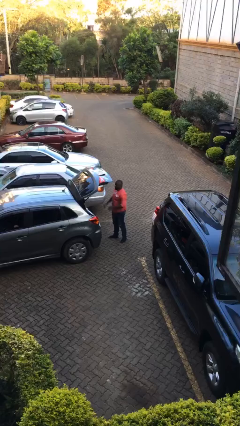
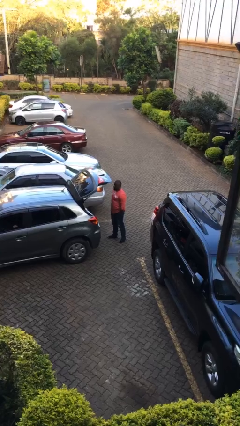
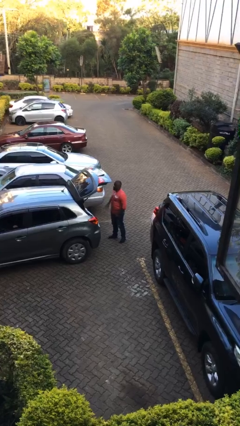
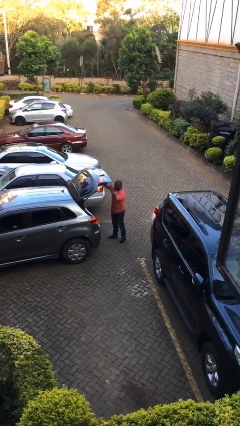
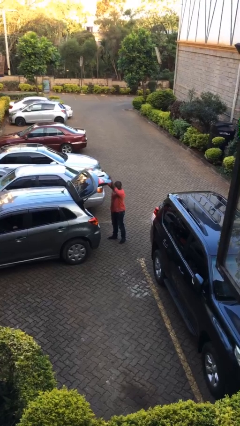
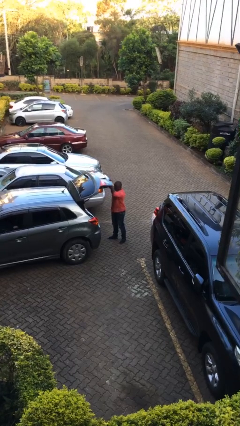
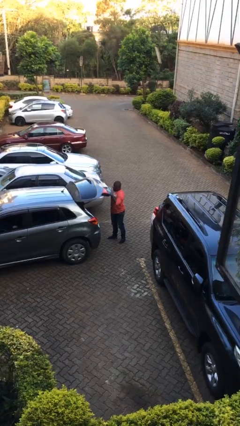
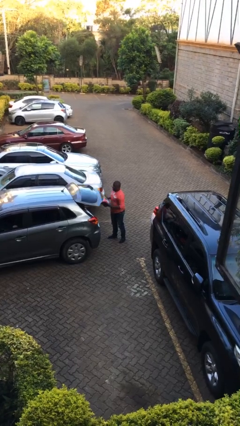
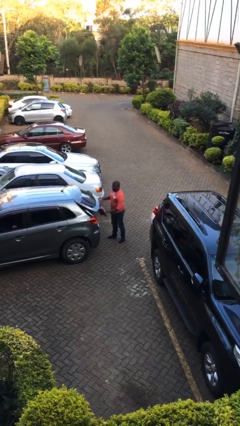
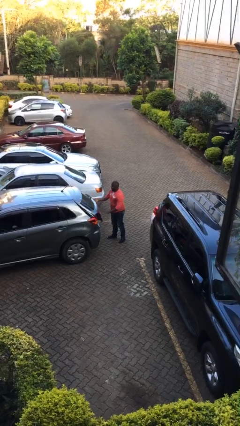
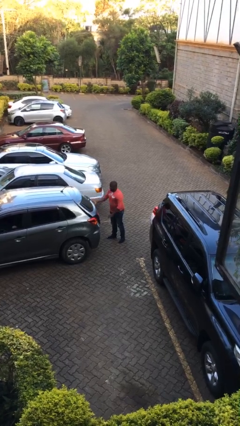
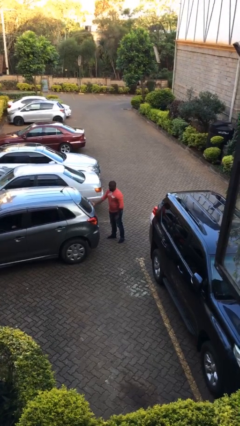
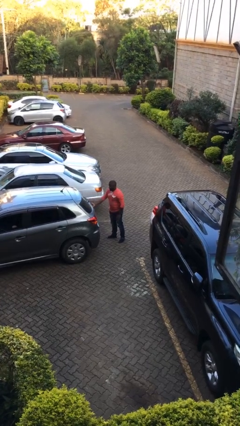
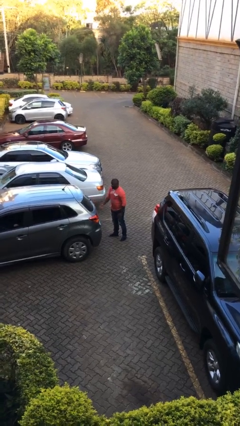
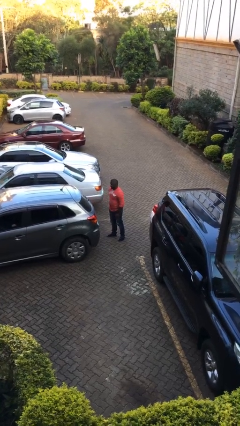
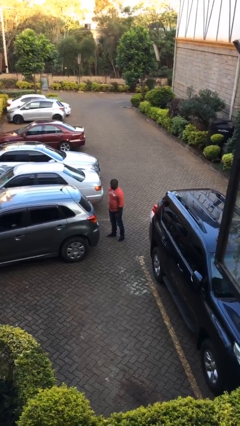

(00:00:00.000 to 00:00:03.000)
person closes car trunk

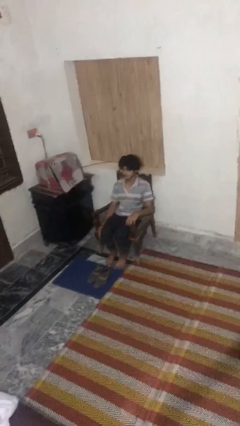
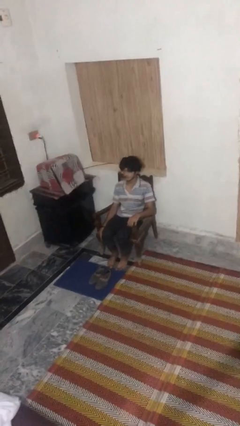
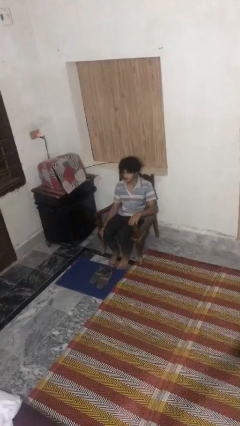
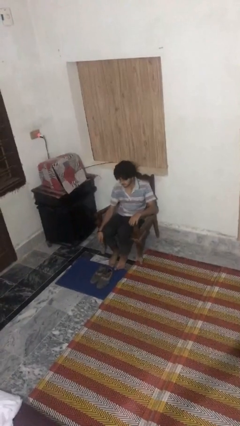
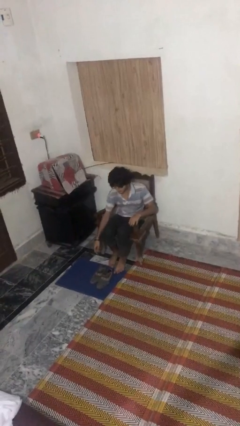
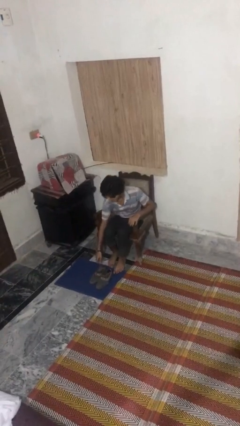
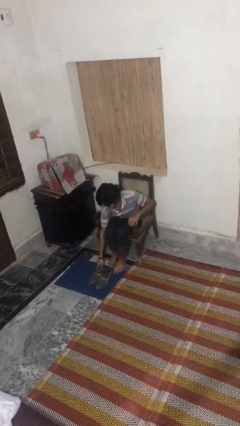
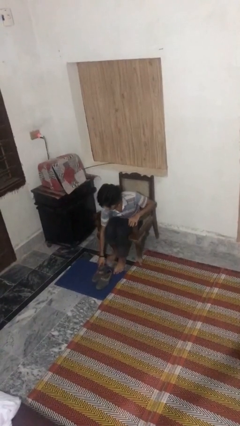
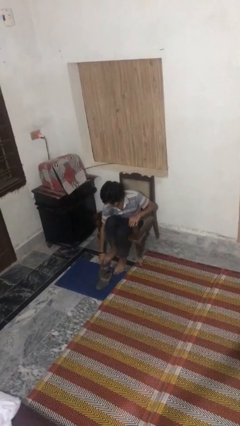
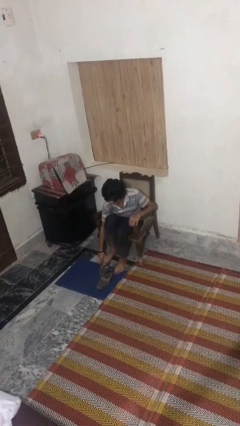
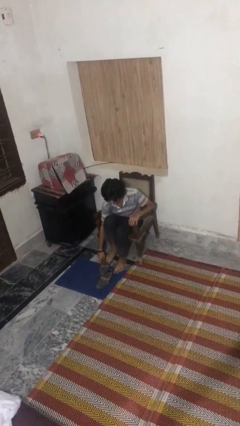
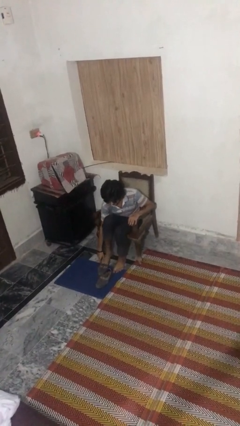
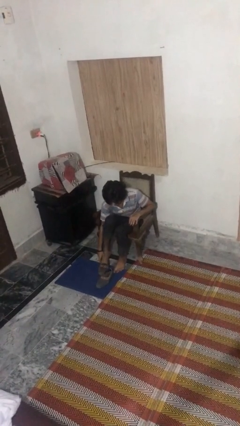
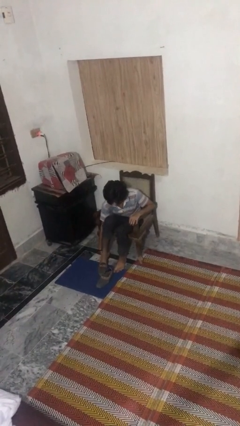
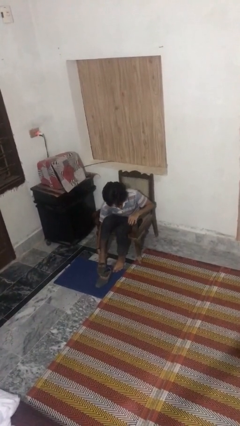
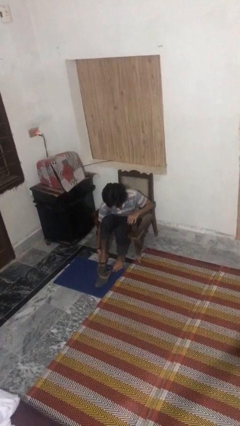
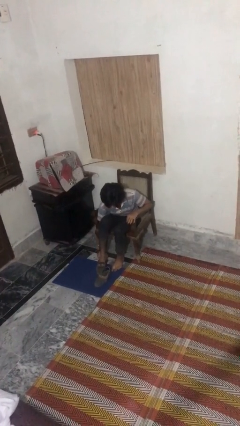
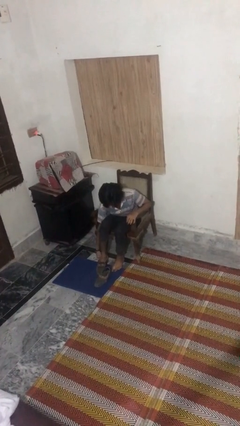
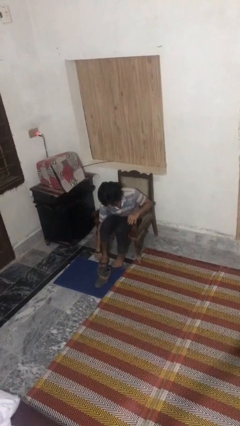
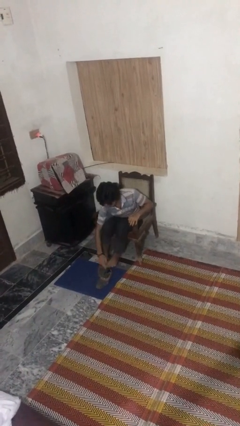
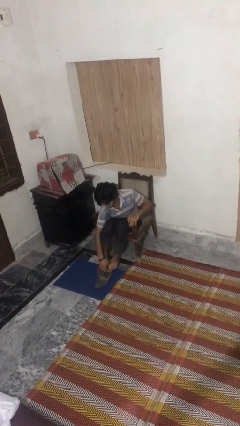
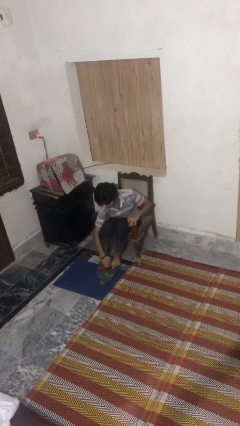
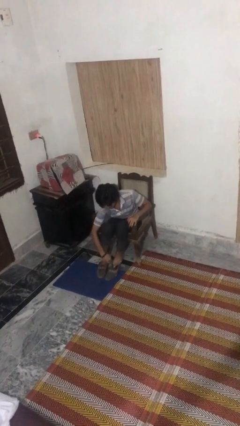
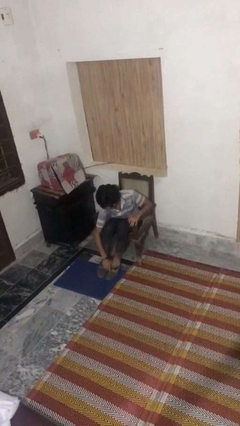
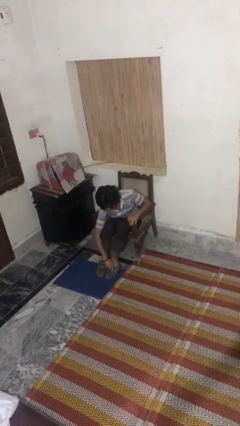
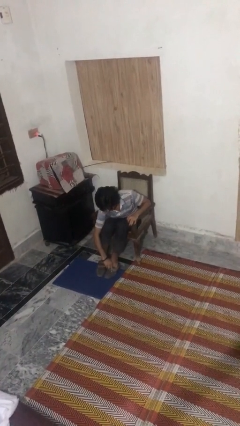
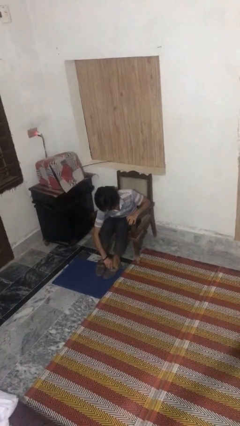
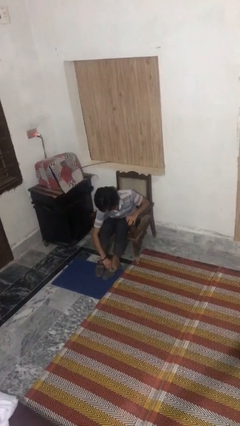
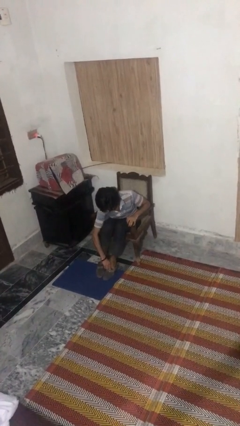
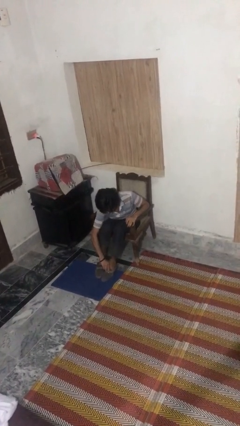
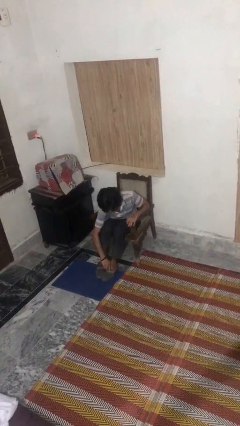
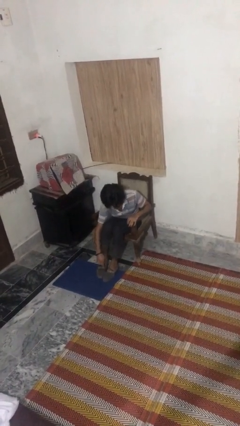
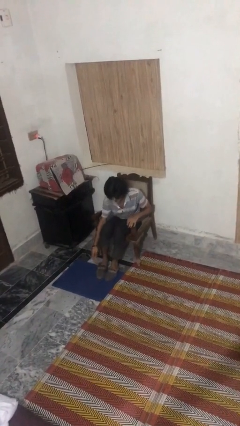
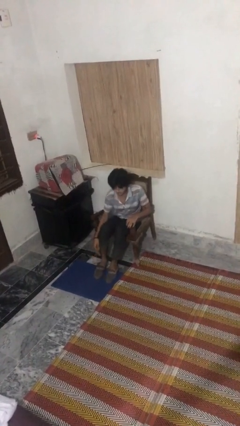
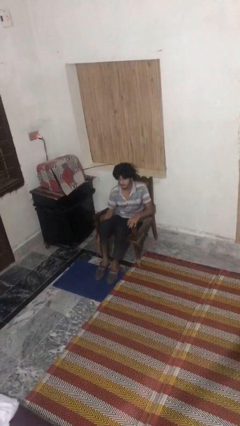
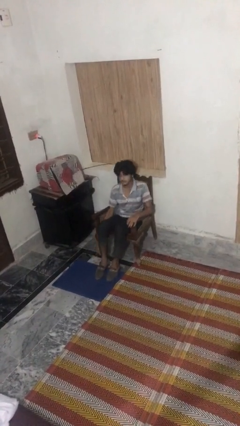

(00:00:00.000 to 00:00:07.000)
person puts on shoes

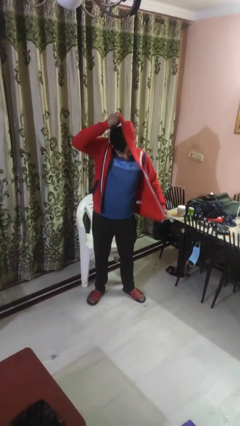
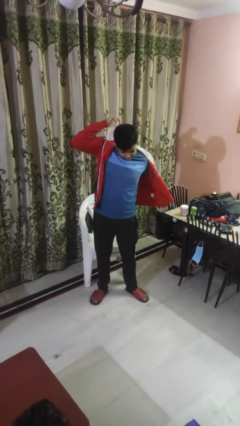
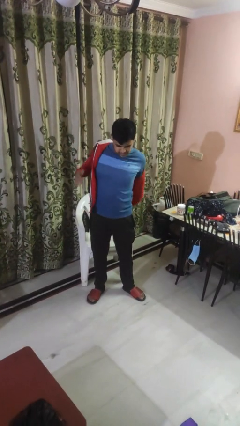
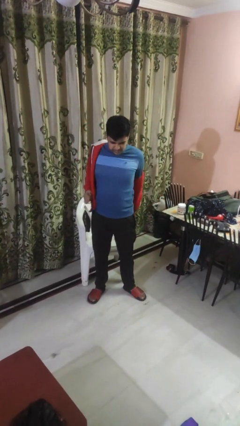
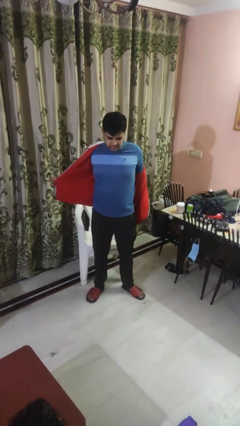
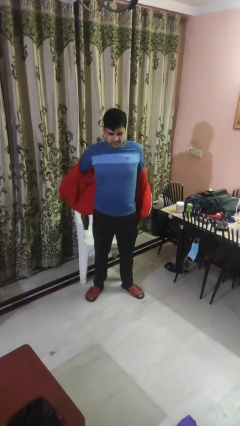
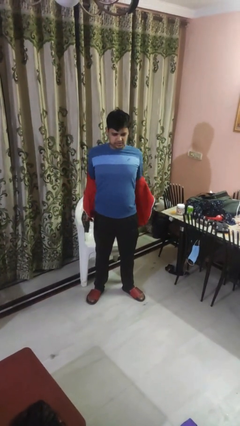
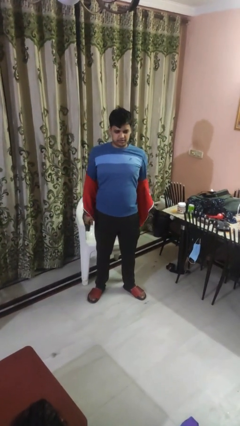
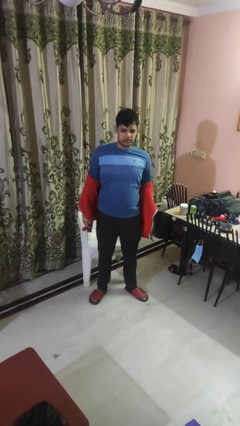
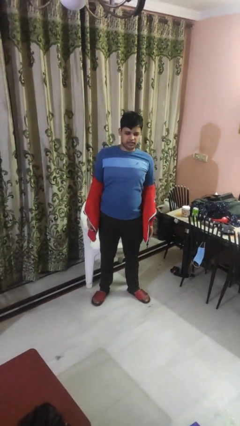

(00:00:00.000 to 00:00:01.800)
person takes off hoodie

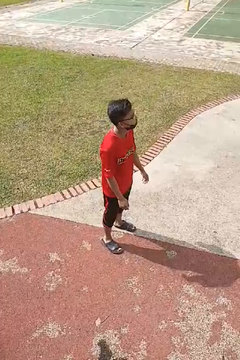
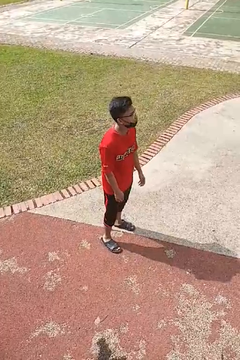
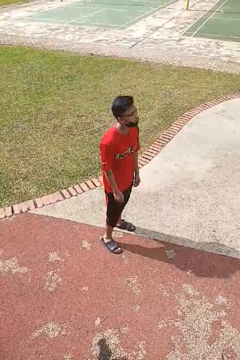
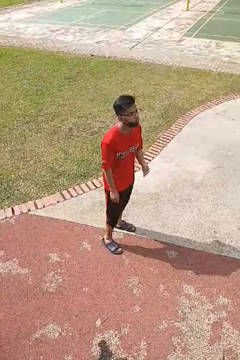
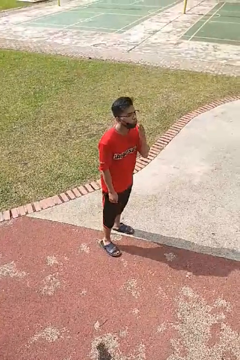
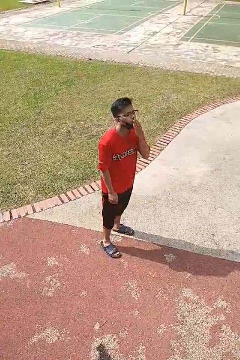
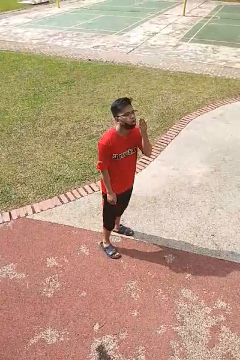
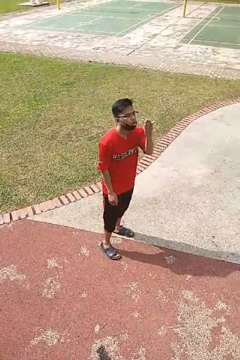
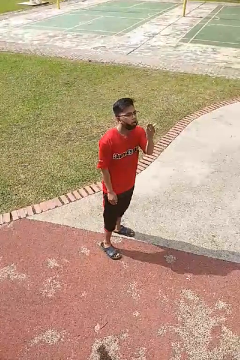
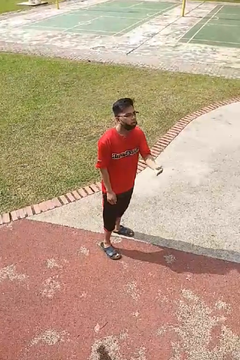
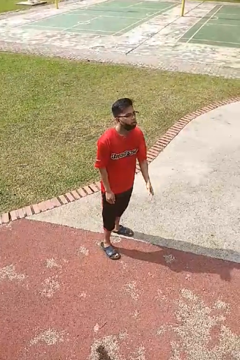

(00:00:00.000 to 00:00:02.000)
person gestures blow kiss

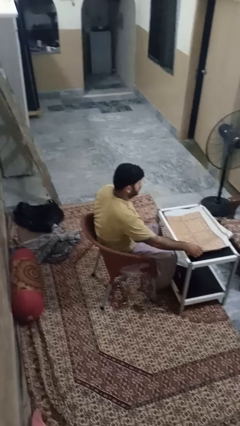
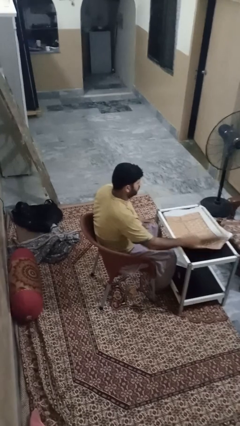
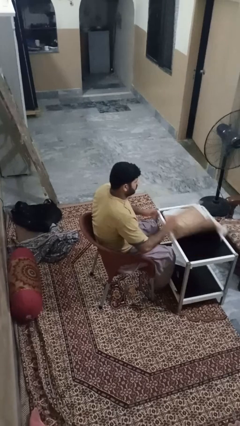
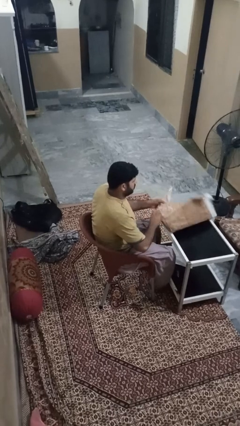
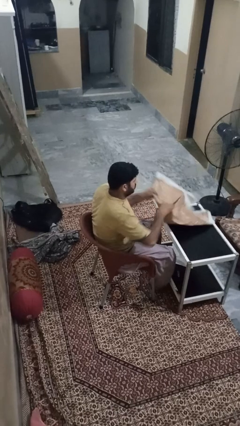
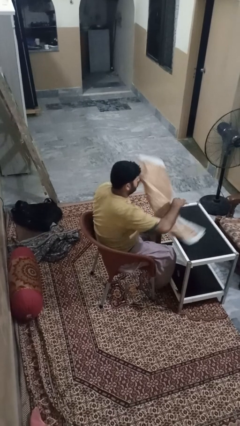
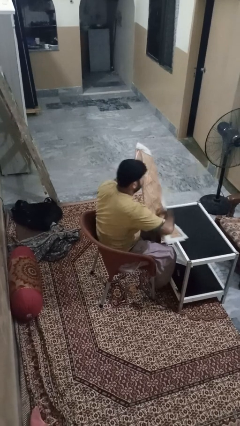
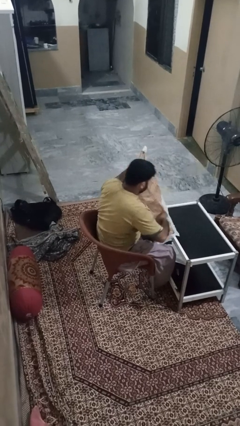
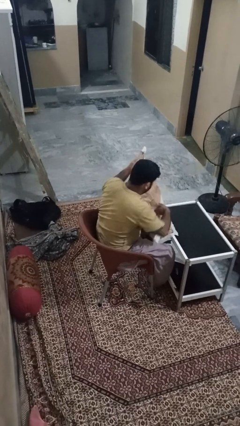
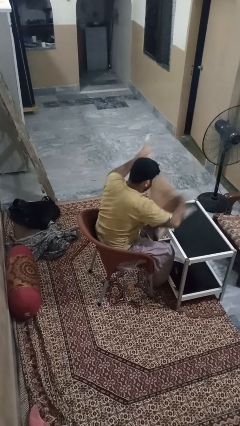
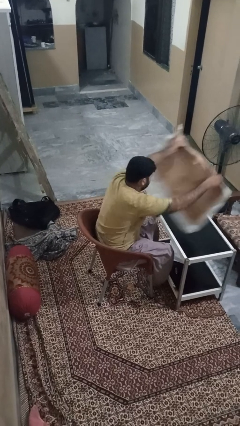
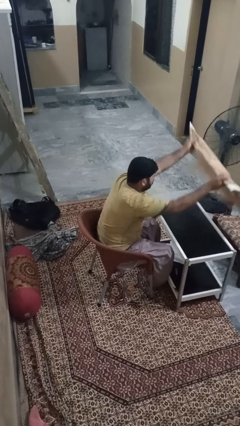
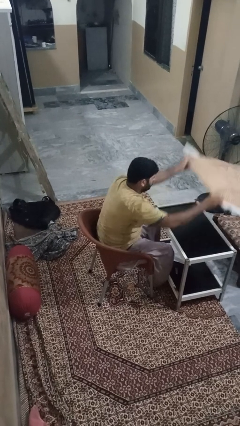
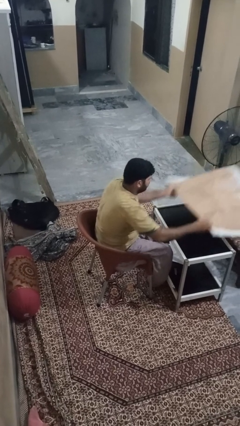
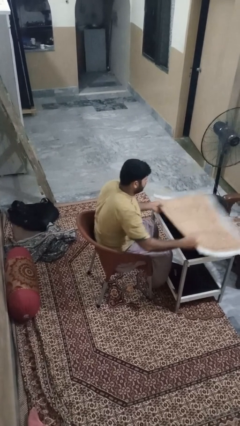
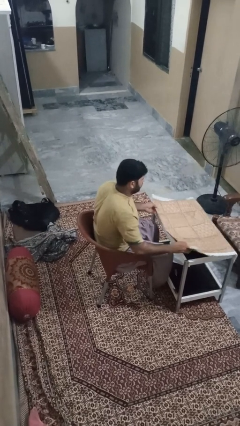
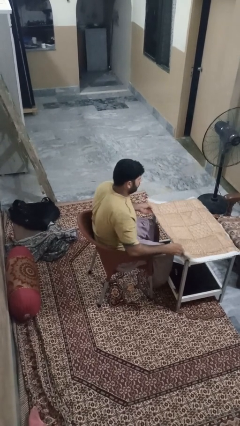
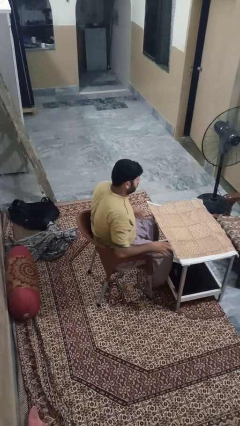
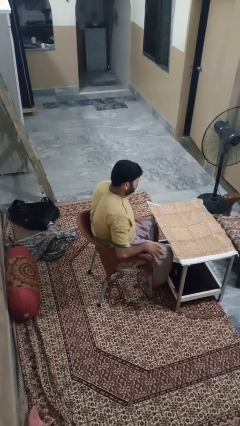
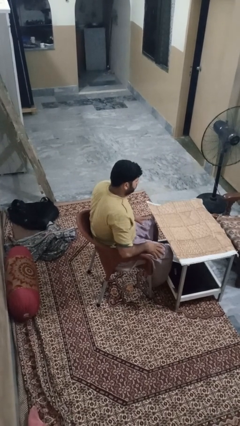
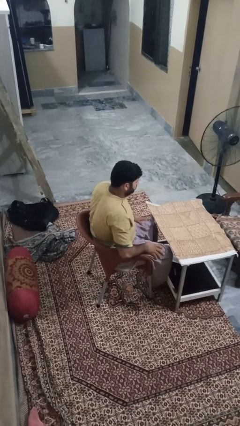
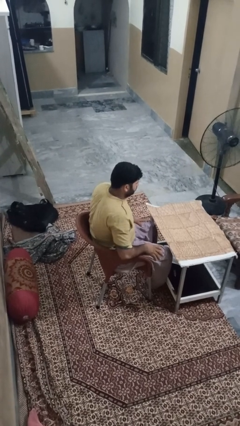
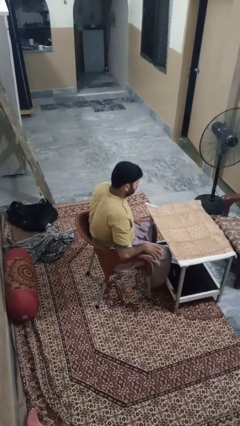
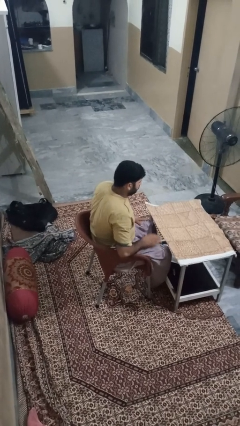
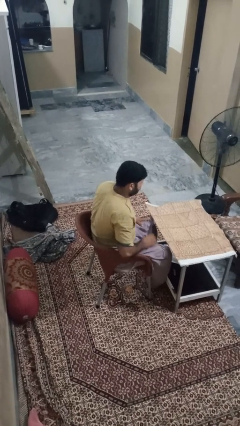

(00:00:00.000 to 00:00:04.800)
person spreads tablecloth
